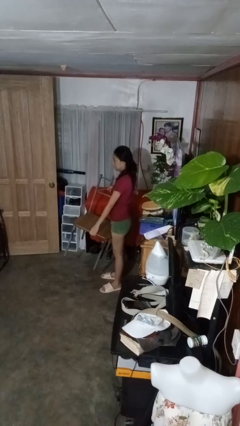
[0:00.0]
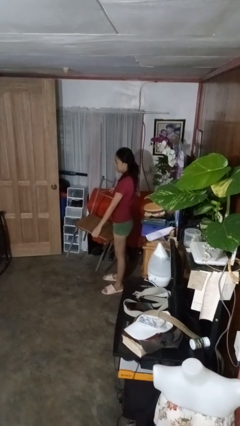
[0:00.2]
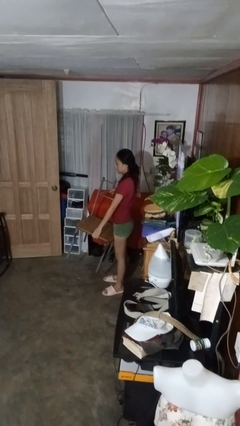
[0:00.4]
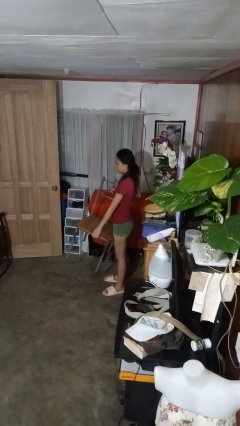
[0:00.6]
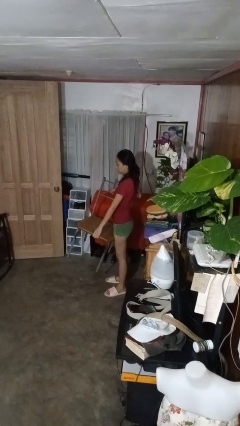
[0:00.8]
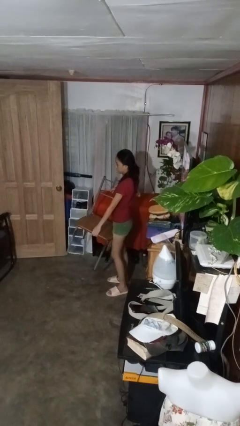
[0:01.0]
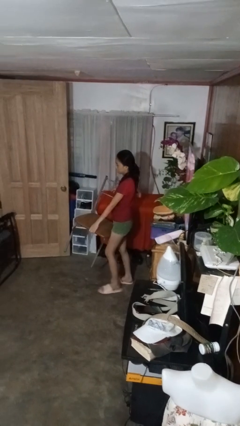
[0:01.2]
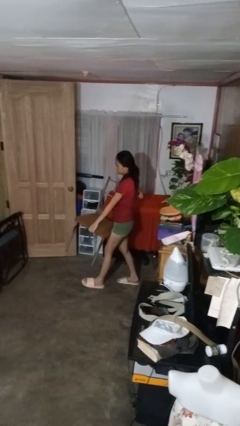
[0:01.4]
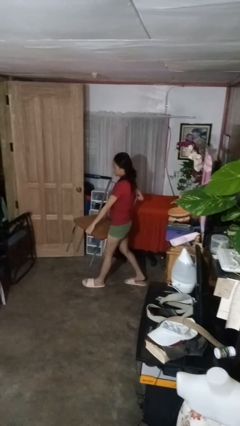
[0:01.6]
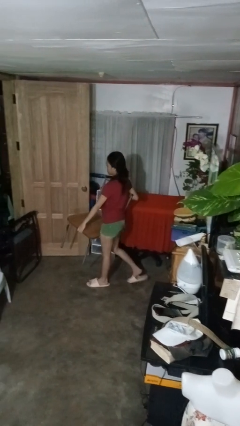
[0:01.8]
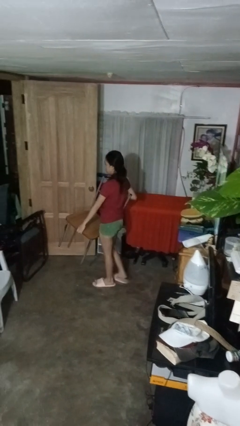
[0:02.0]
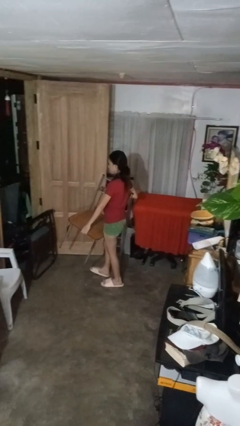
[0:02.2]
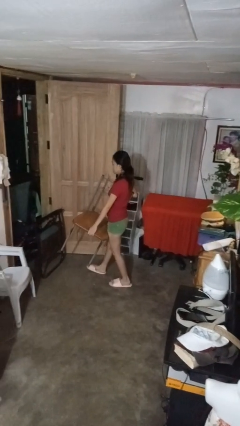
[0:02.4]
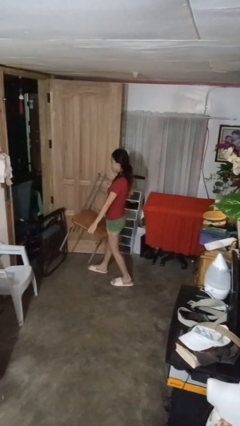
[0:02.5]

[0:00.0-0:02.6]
person carries furniture

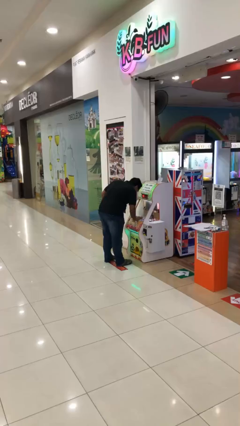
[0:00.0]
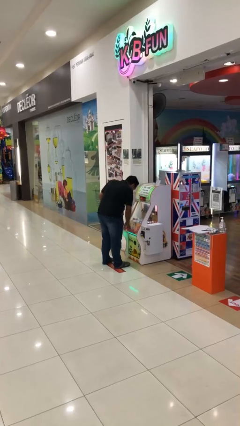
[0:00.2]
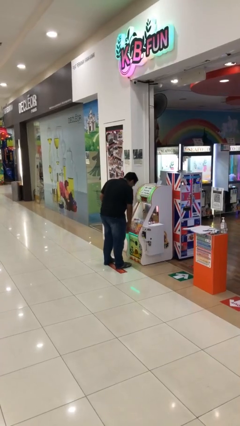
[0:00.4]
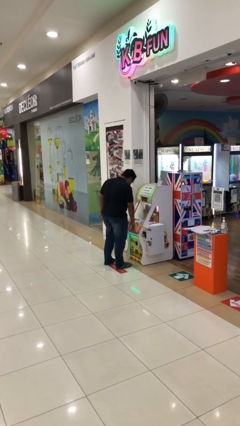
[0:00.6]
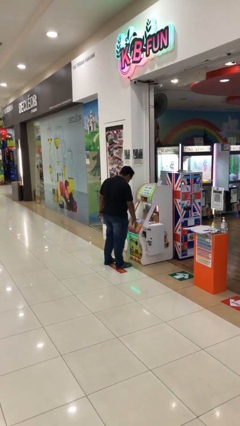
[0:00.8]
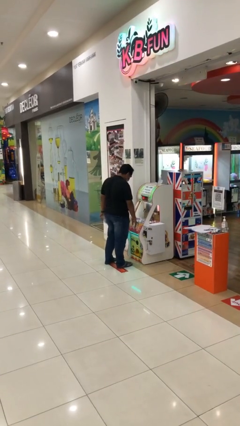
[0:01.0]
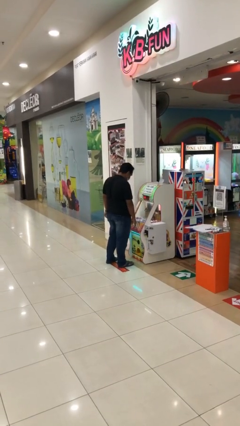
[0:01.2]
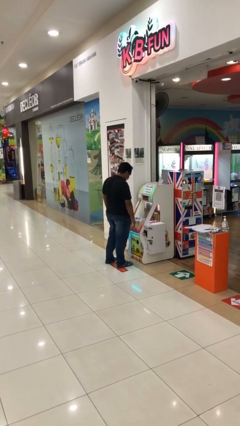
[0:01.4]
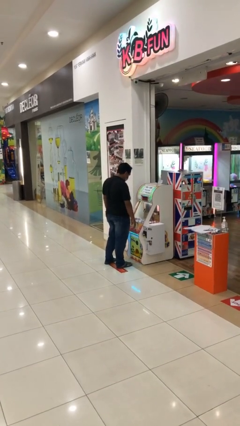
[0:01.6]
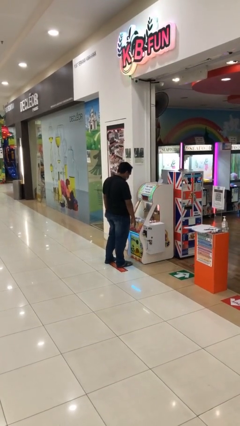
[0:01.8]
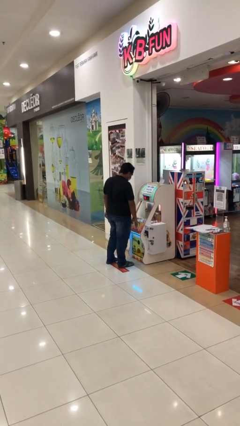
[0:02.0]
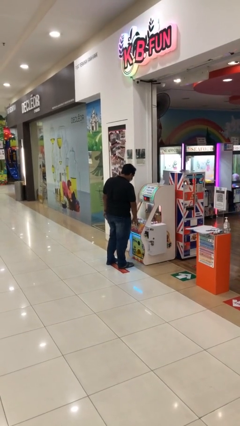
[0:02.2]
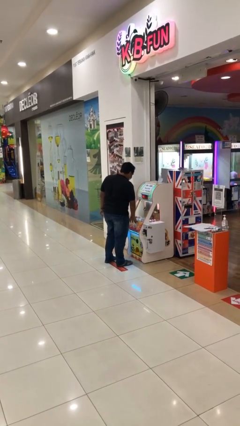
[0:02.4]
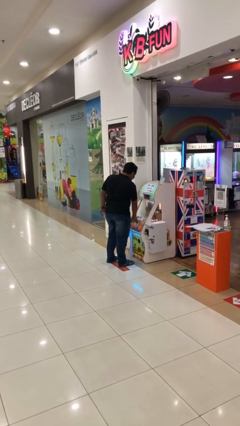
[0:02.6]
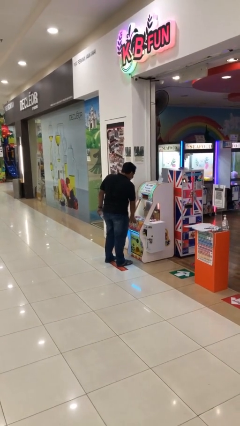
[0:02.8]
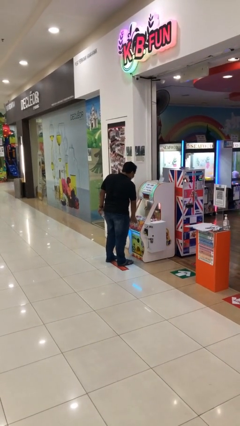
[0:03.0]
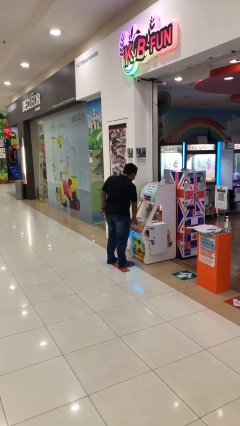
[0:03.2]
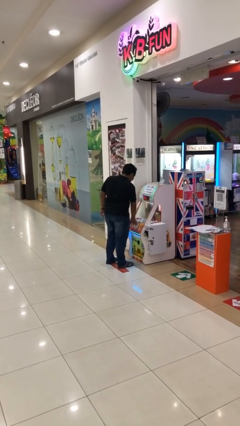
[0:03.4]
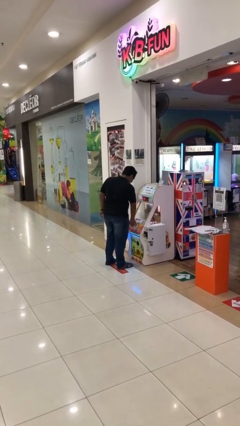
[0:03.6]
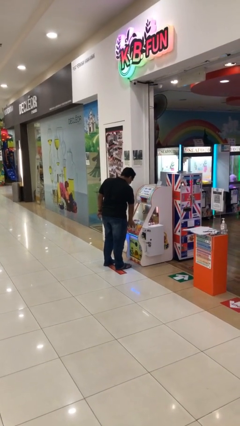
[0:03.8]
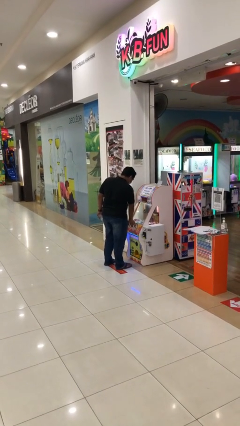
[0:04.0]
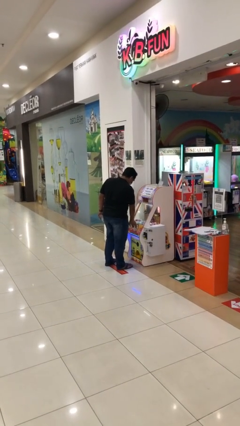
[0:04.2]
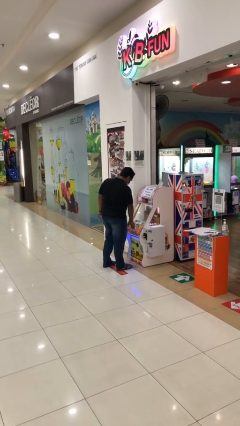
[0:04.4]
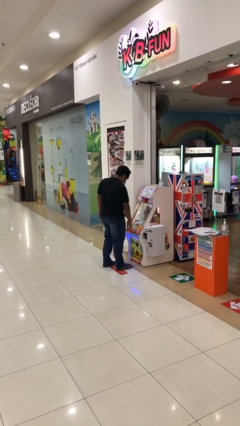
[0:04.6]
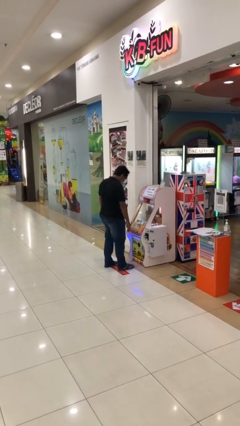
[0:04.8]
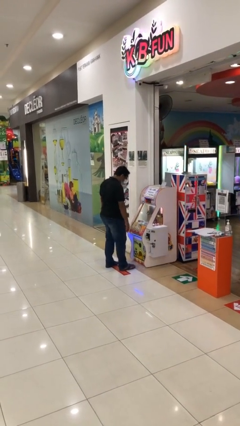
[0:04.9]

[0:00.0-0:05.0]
person purchases from machine

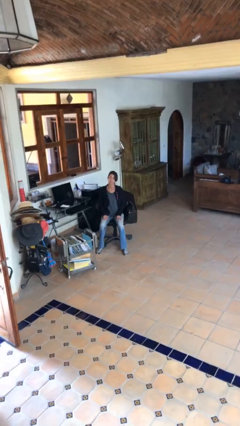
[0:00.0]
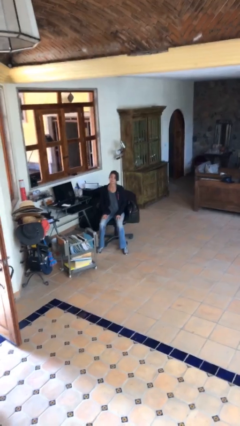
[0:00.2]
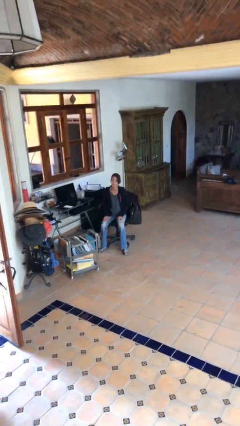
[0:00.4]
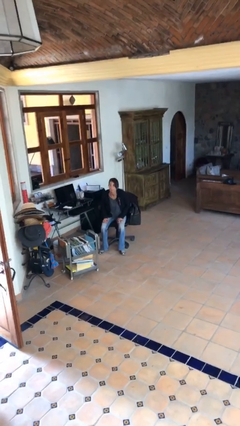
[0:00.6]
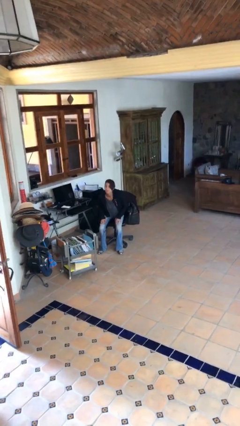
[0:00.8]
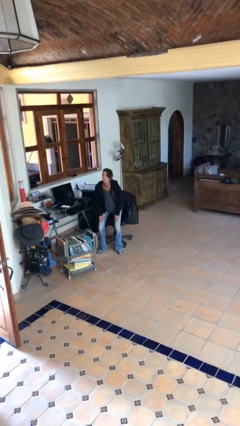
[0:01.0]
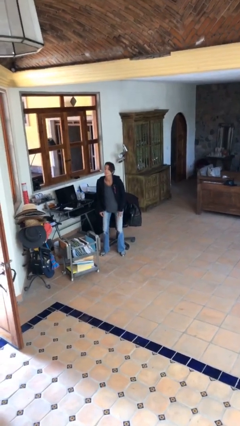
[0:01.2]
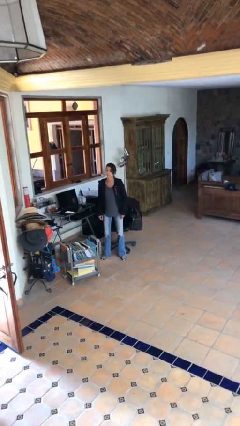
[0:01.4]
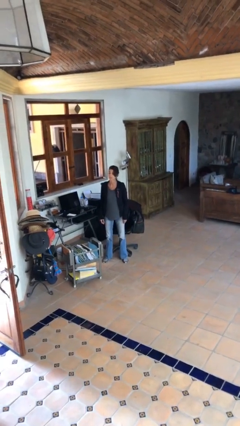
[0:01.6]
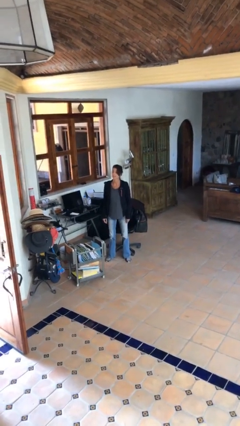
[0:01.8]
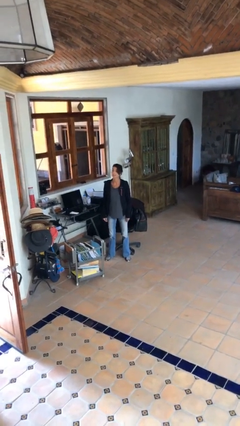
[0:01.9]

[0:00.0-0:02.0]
person stands up

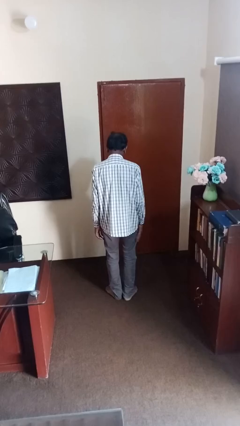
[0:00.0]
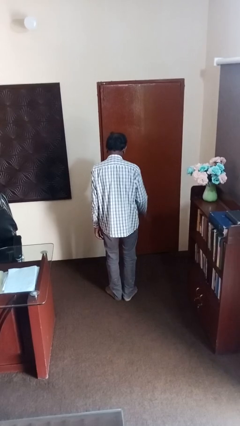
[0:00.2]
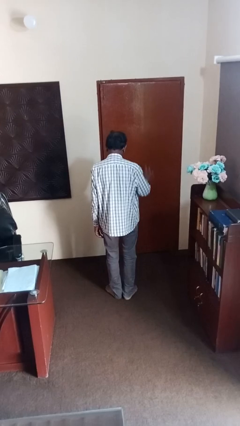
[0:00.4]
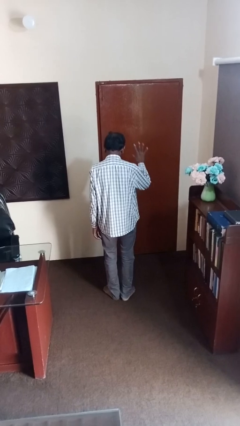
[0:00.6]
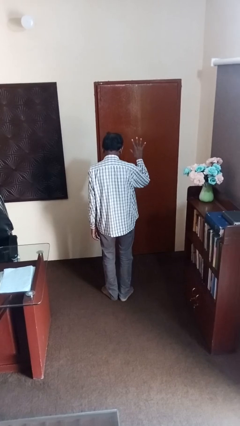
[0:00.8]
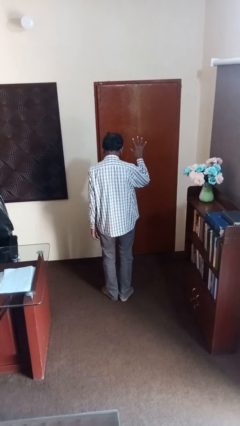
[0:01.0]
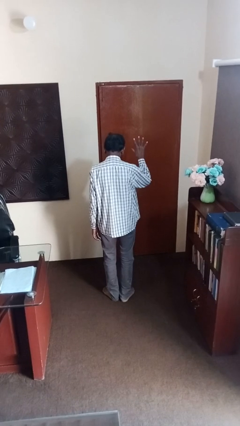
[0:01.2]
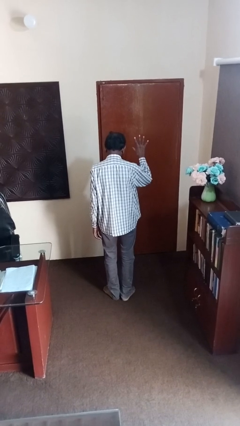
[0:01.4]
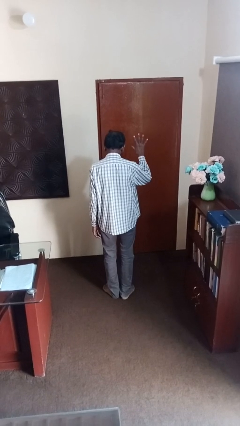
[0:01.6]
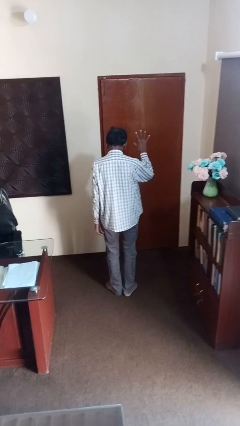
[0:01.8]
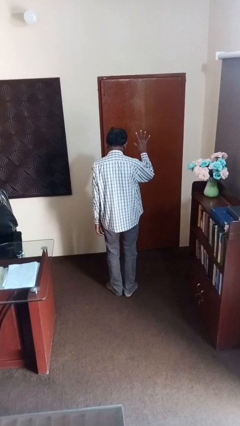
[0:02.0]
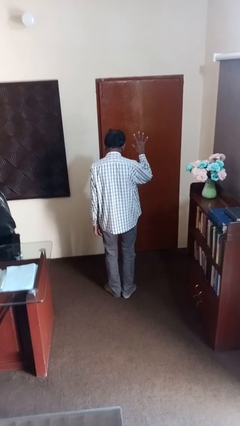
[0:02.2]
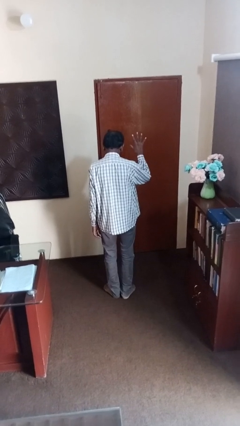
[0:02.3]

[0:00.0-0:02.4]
person gestures number five

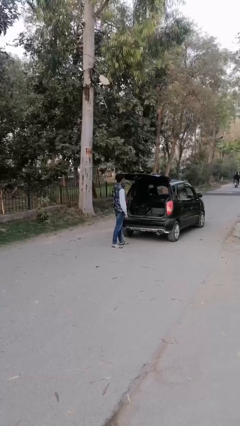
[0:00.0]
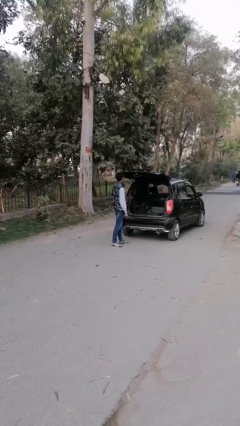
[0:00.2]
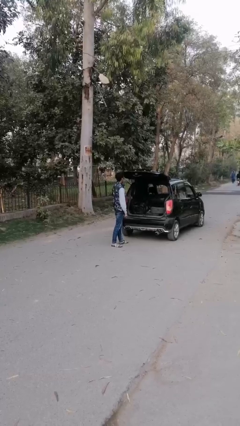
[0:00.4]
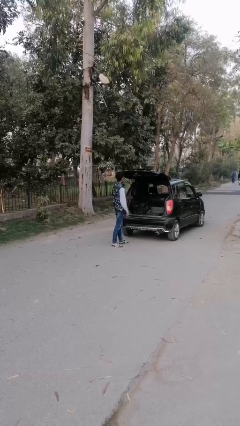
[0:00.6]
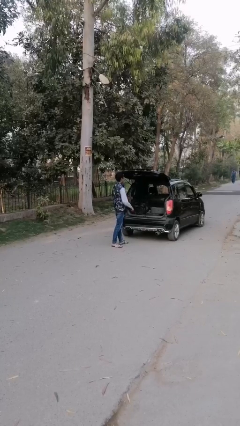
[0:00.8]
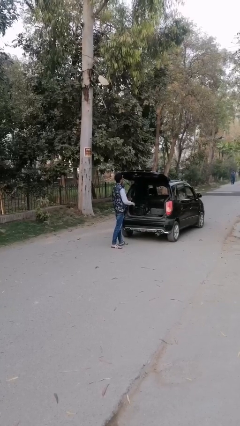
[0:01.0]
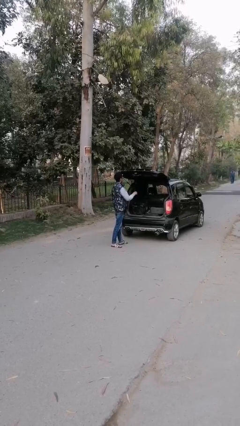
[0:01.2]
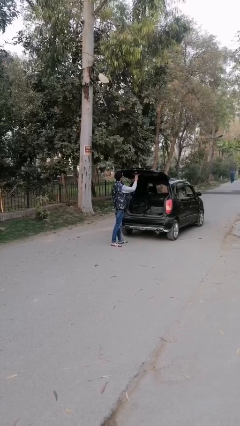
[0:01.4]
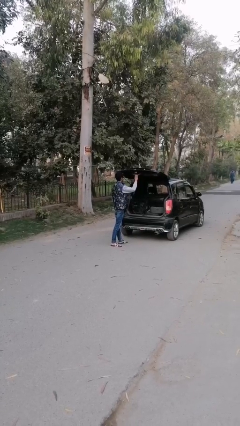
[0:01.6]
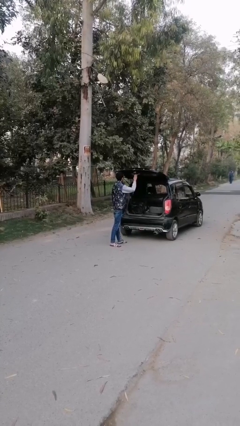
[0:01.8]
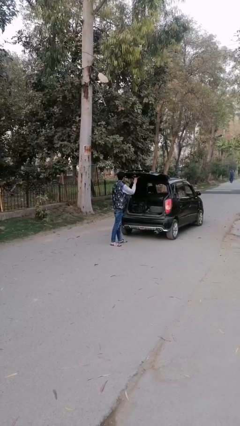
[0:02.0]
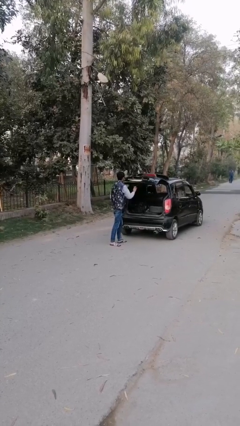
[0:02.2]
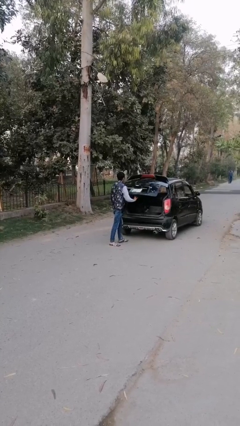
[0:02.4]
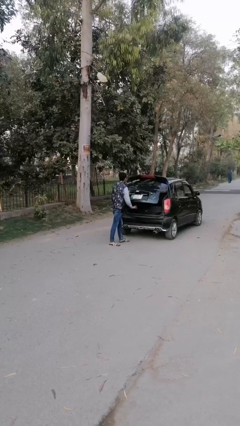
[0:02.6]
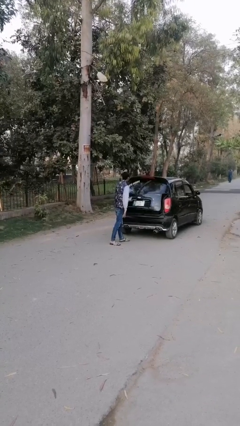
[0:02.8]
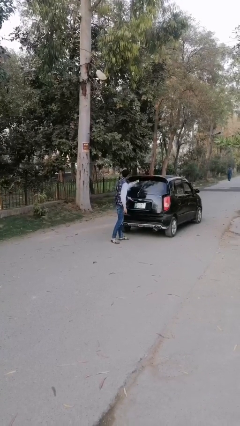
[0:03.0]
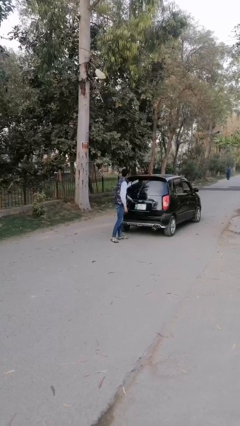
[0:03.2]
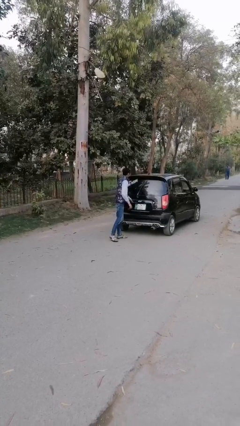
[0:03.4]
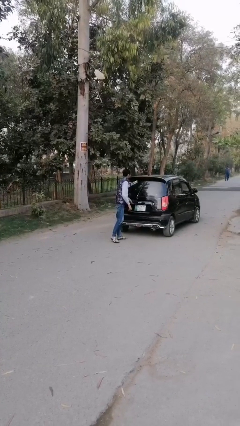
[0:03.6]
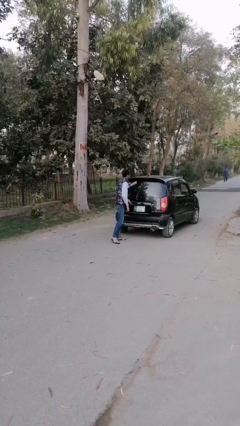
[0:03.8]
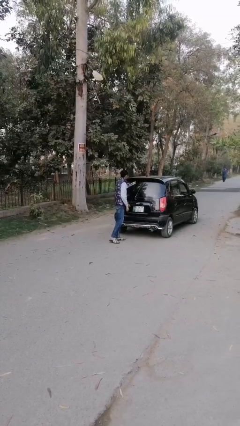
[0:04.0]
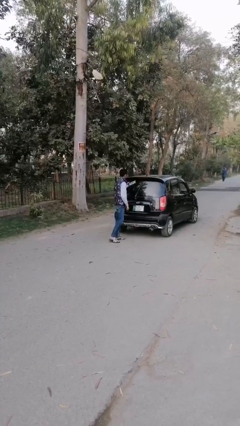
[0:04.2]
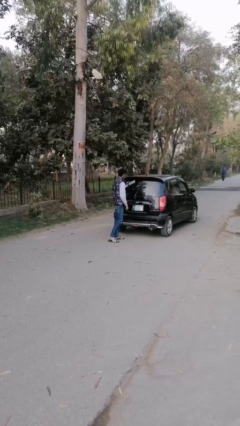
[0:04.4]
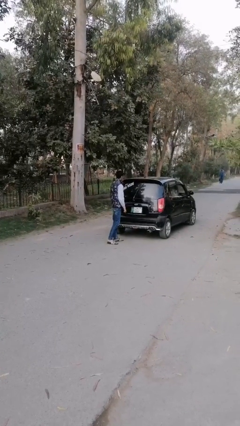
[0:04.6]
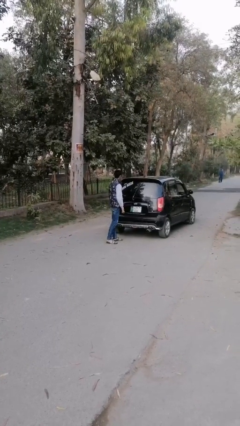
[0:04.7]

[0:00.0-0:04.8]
person opens car trunk

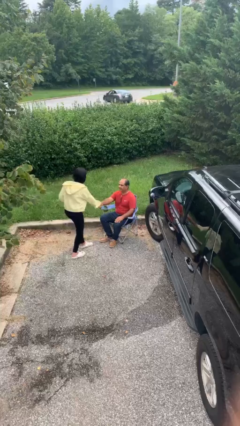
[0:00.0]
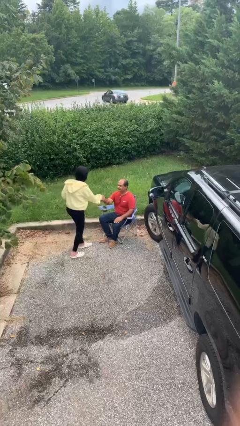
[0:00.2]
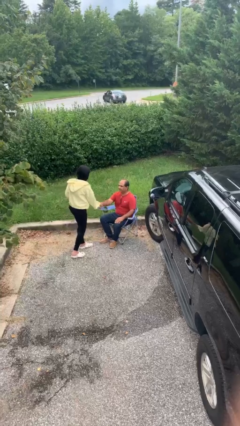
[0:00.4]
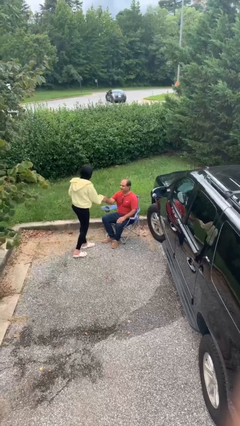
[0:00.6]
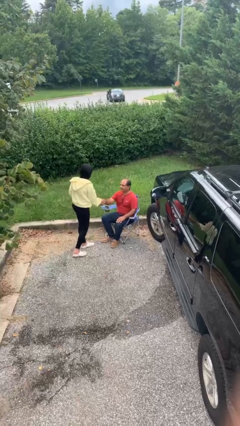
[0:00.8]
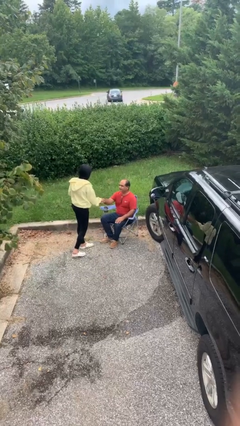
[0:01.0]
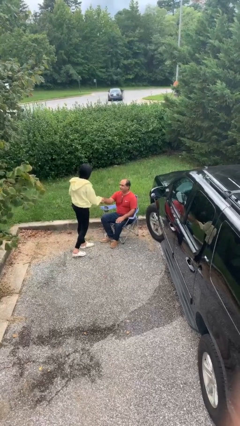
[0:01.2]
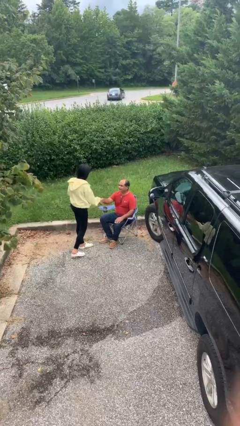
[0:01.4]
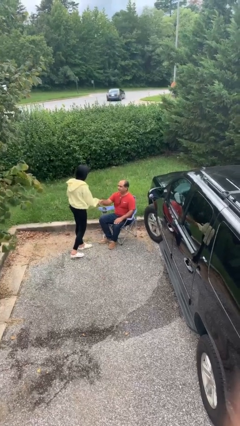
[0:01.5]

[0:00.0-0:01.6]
person shakes hand
